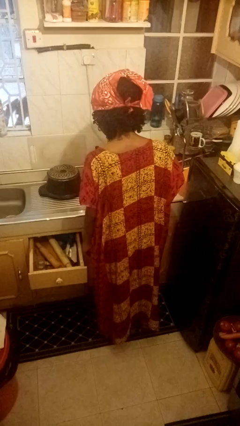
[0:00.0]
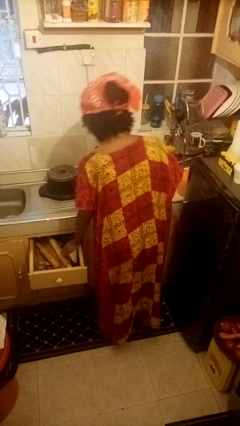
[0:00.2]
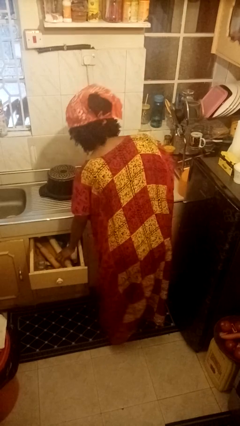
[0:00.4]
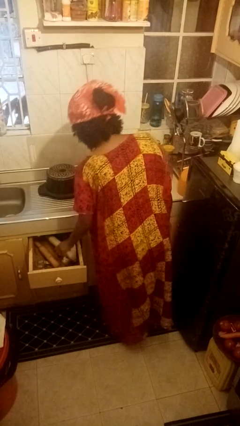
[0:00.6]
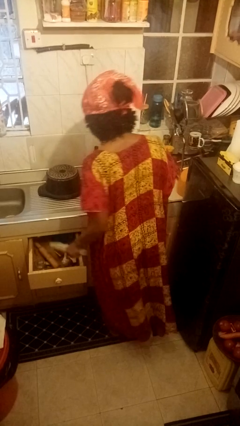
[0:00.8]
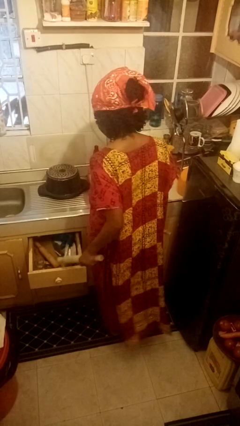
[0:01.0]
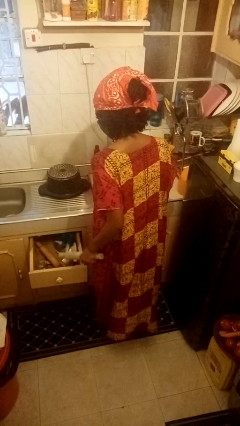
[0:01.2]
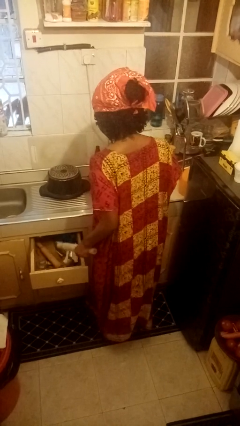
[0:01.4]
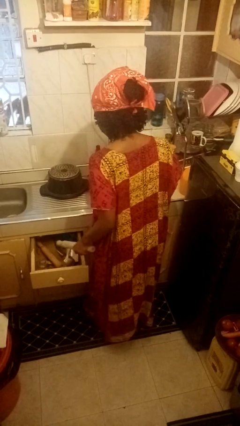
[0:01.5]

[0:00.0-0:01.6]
person takes object from kitchen drawer

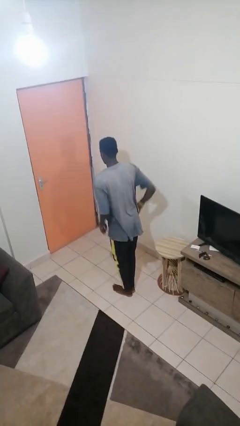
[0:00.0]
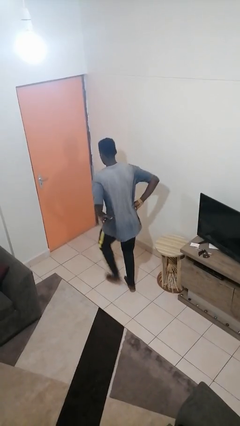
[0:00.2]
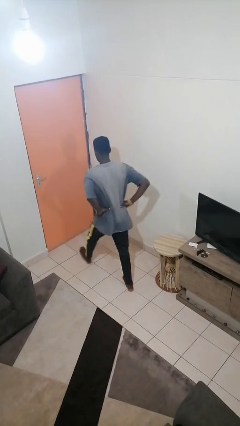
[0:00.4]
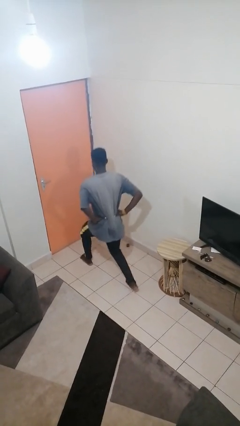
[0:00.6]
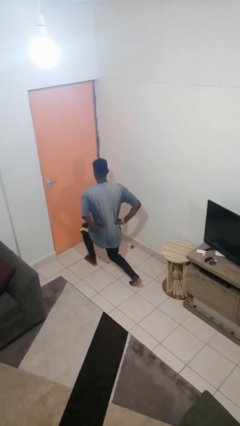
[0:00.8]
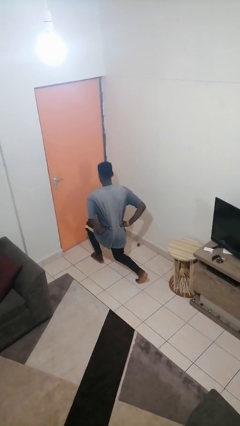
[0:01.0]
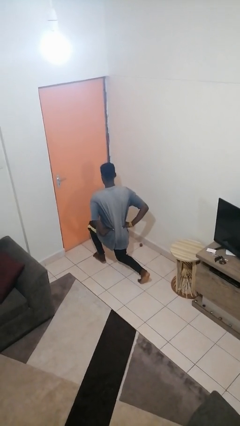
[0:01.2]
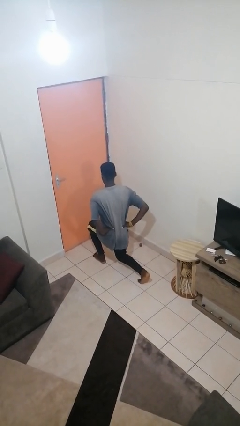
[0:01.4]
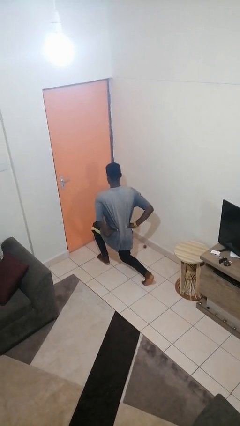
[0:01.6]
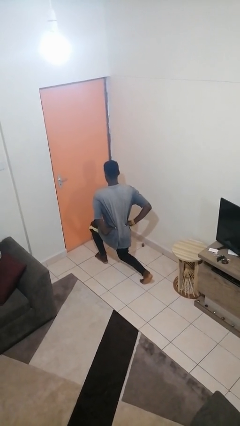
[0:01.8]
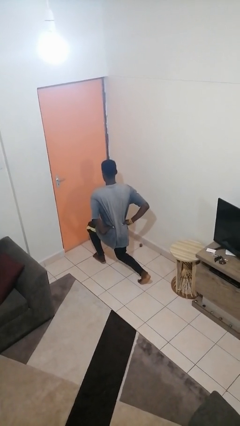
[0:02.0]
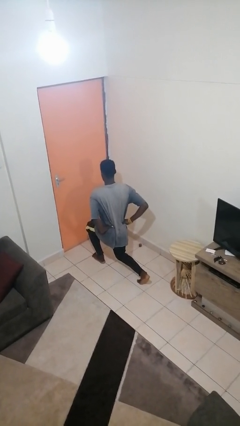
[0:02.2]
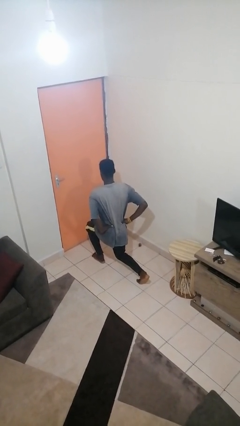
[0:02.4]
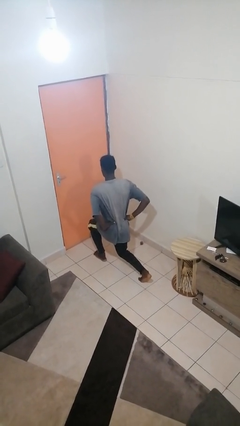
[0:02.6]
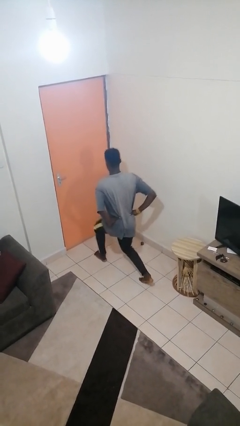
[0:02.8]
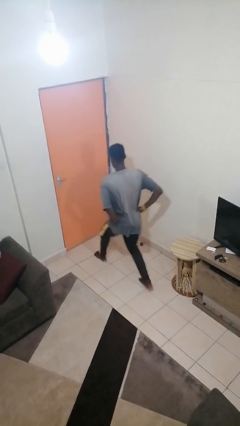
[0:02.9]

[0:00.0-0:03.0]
person exercises with lunges

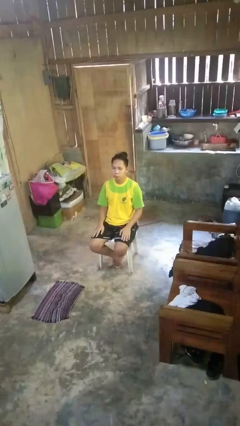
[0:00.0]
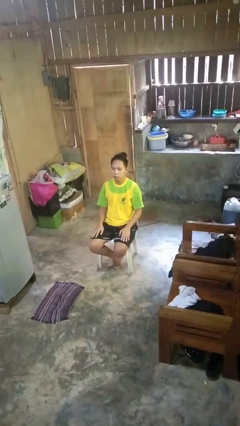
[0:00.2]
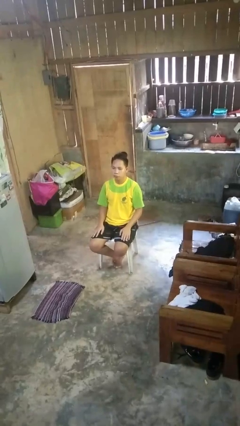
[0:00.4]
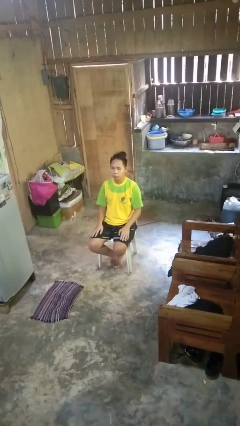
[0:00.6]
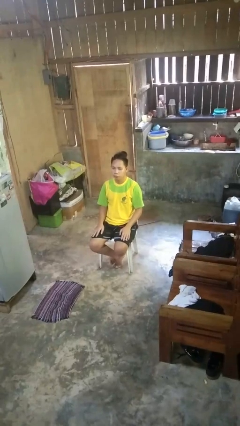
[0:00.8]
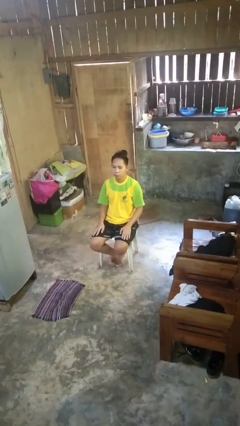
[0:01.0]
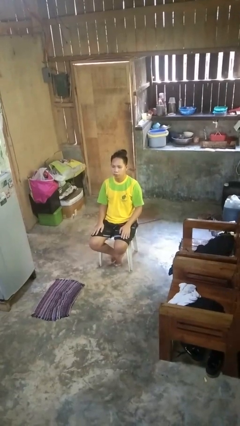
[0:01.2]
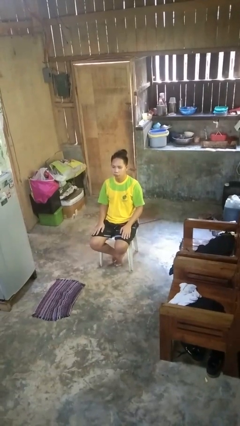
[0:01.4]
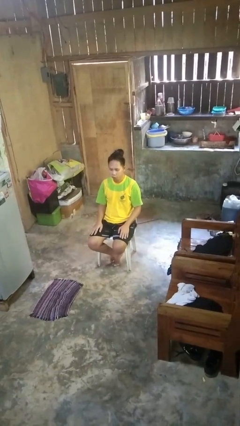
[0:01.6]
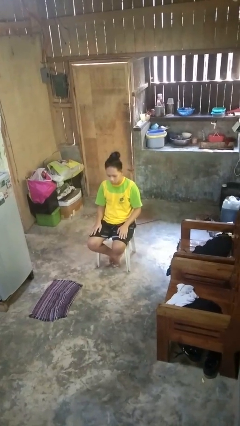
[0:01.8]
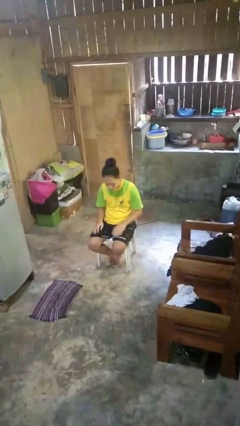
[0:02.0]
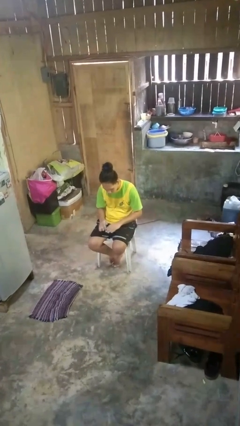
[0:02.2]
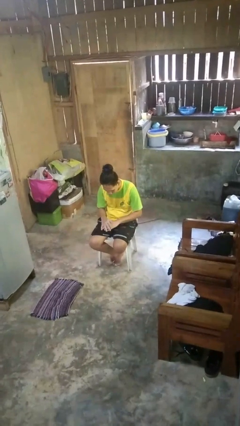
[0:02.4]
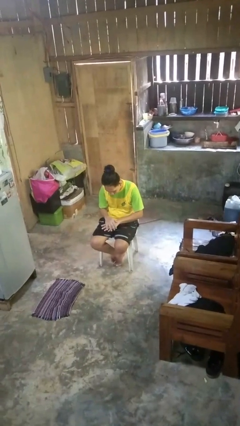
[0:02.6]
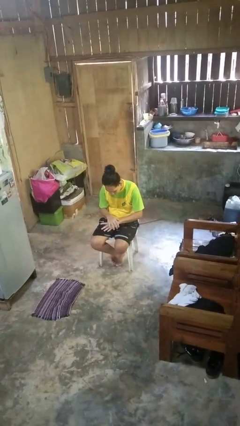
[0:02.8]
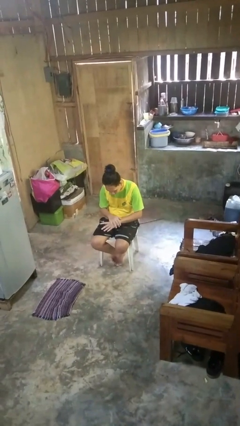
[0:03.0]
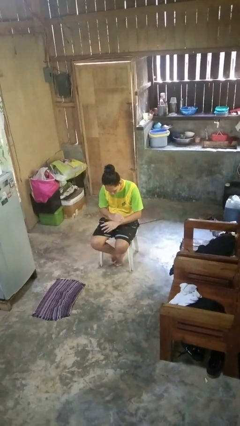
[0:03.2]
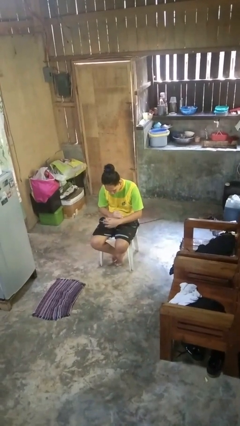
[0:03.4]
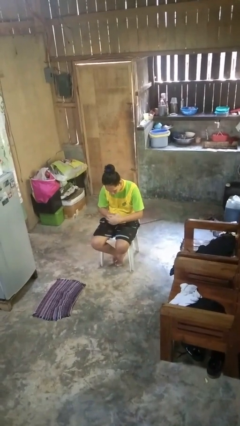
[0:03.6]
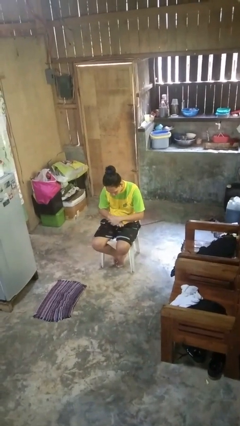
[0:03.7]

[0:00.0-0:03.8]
person looks at hands in lap

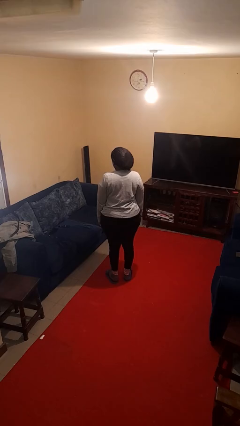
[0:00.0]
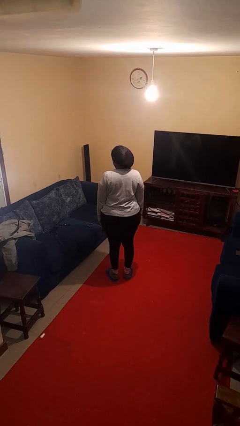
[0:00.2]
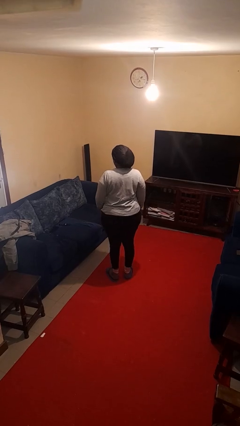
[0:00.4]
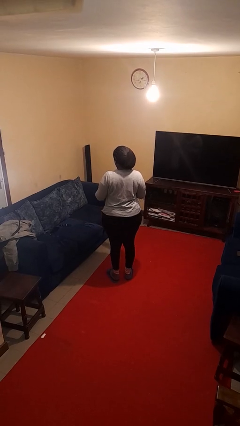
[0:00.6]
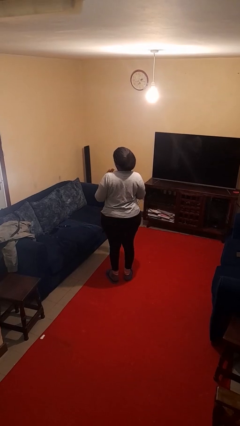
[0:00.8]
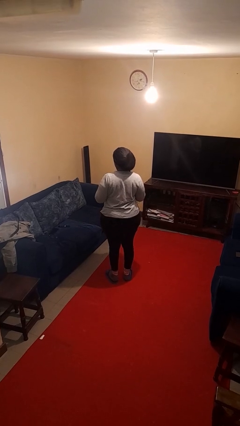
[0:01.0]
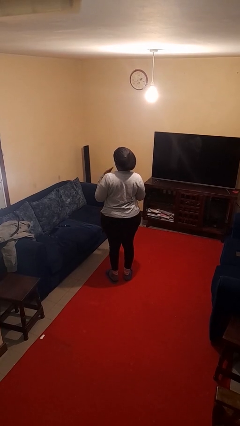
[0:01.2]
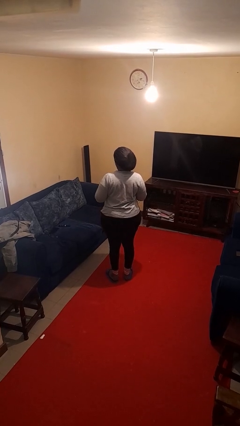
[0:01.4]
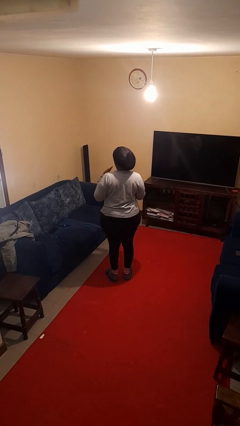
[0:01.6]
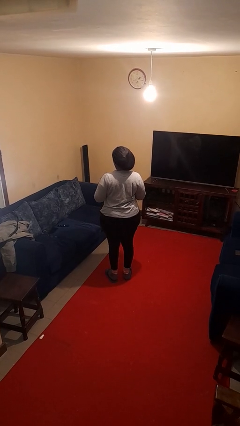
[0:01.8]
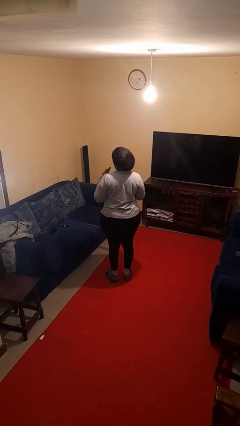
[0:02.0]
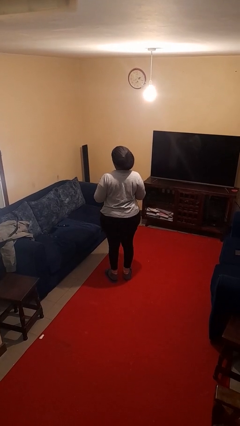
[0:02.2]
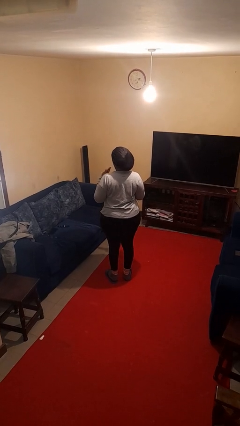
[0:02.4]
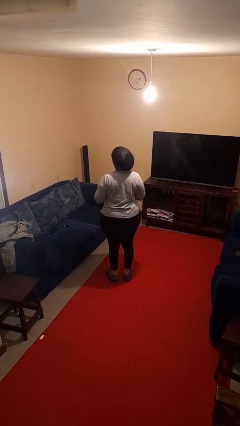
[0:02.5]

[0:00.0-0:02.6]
person drums on chest

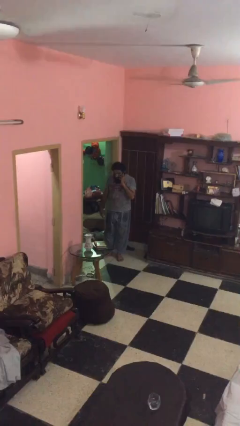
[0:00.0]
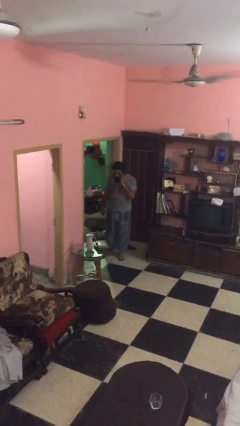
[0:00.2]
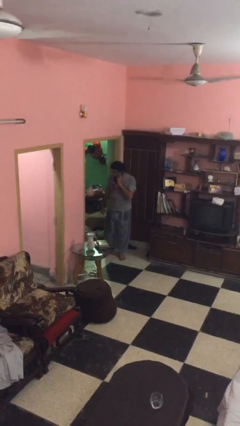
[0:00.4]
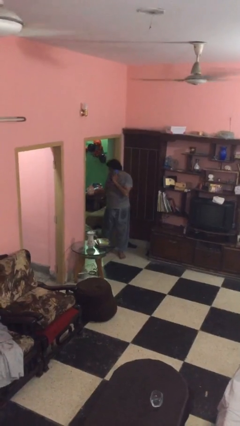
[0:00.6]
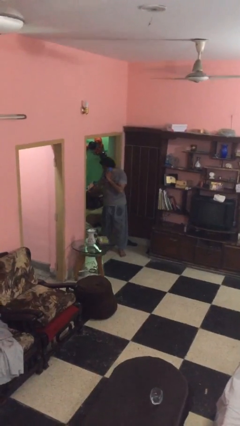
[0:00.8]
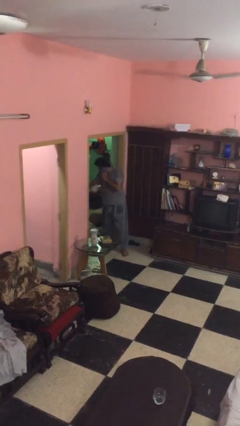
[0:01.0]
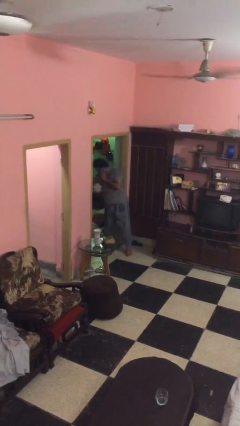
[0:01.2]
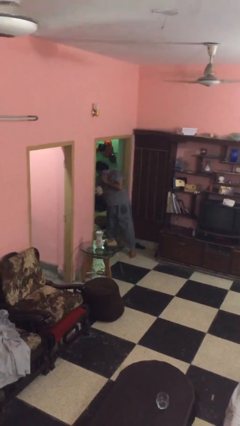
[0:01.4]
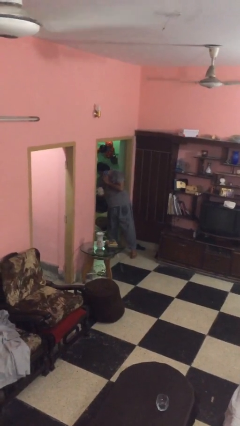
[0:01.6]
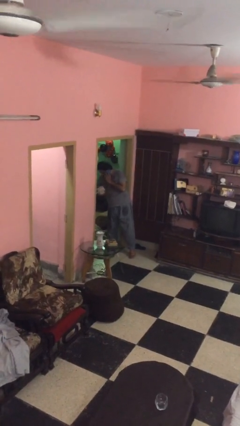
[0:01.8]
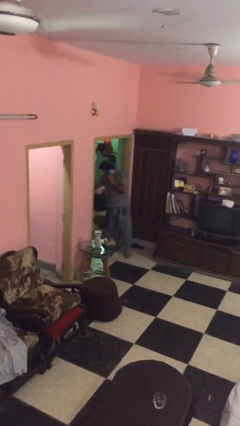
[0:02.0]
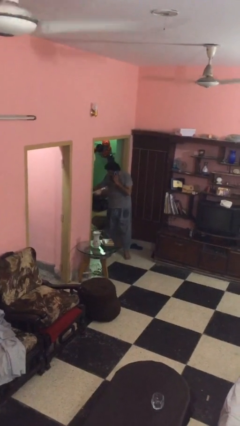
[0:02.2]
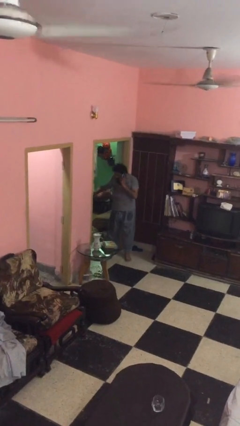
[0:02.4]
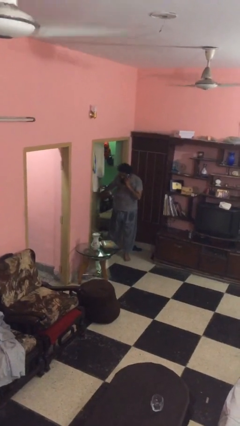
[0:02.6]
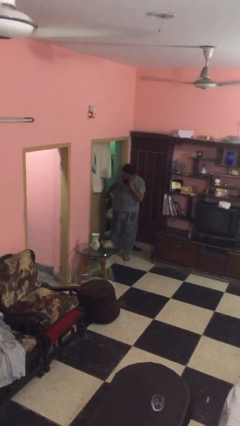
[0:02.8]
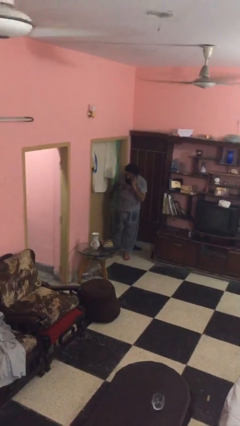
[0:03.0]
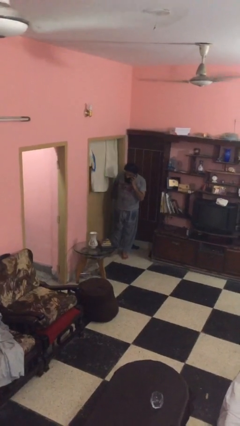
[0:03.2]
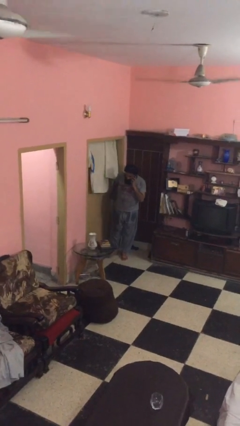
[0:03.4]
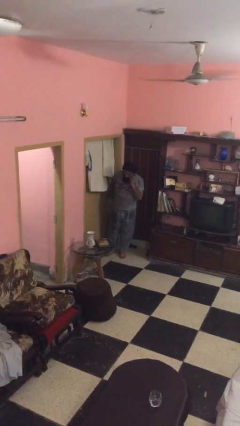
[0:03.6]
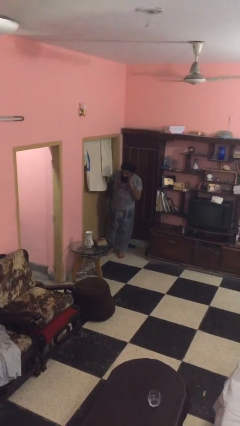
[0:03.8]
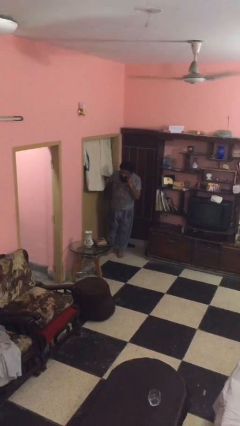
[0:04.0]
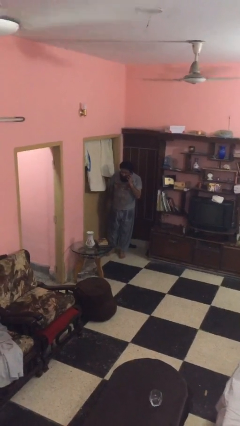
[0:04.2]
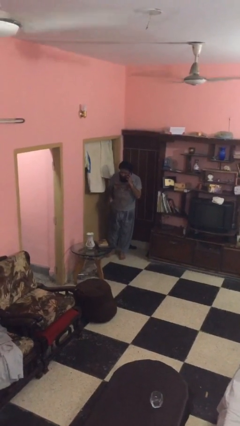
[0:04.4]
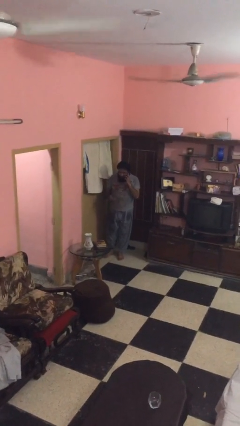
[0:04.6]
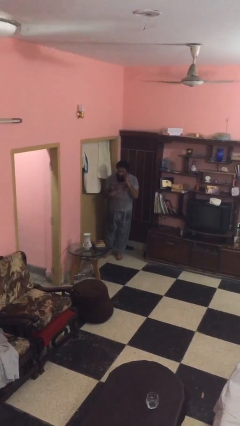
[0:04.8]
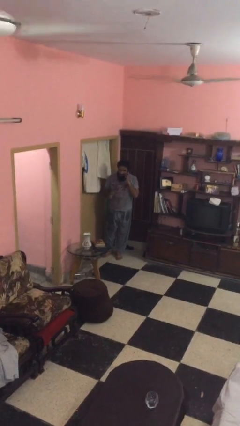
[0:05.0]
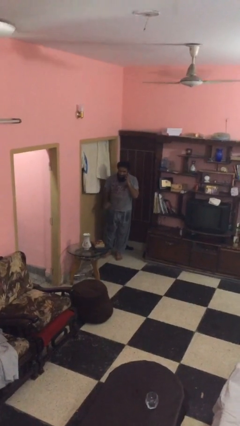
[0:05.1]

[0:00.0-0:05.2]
person closes facility door

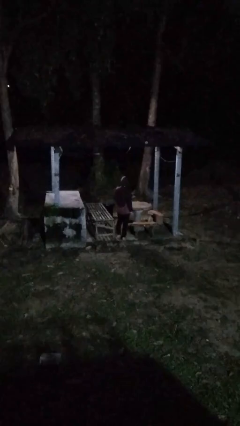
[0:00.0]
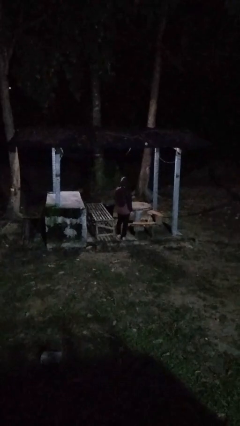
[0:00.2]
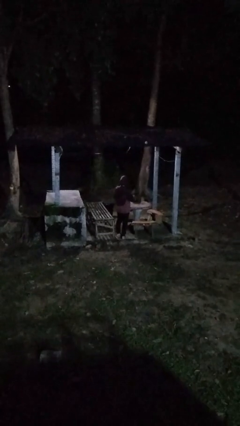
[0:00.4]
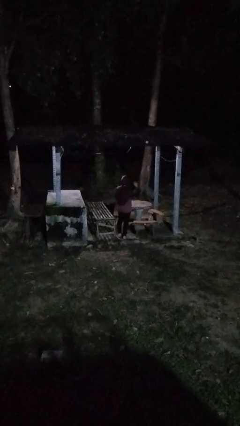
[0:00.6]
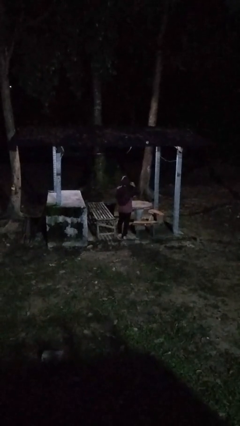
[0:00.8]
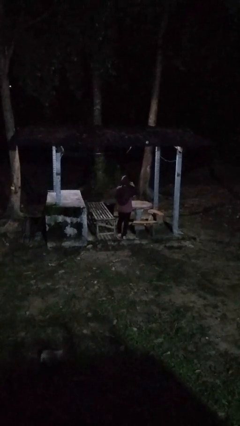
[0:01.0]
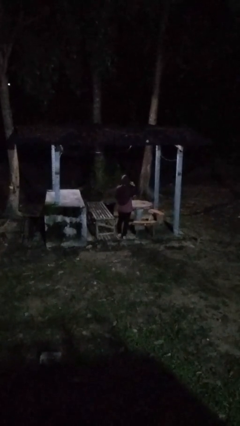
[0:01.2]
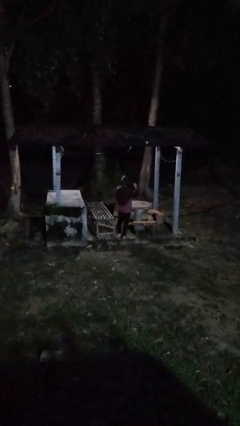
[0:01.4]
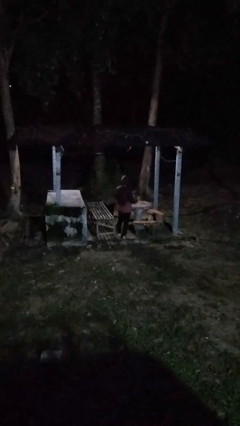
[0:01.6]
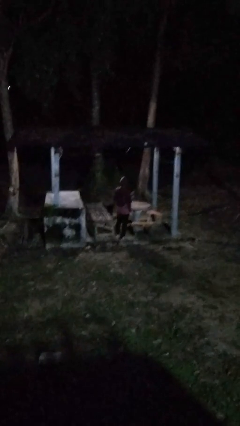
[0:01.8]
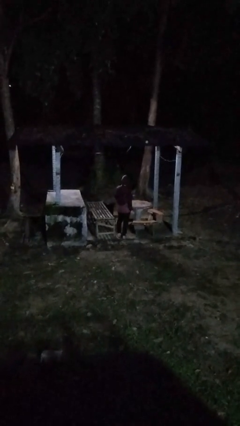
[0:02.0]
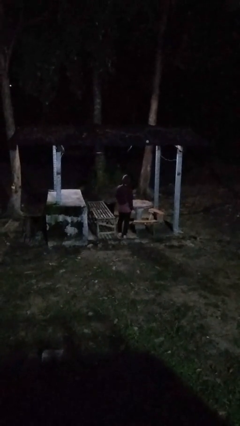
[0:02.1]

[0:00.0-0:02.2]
person gestures listen closely
